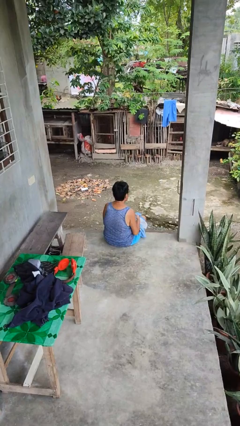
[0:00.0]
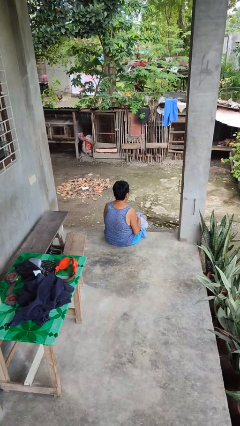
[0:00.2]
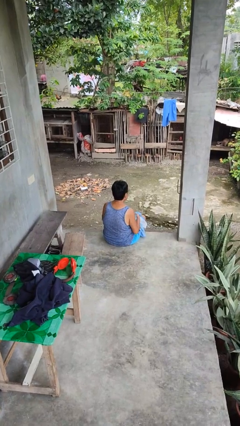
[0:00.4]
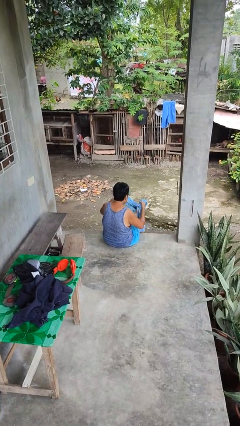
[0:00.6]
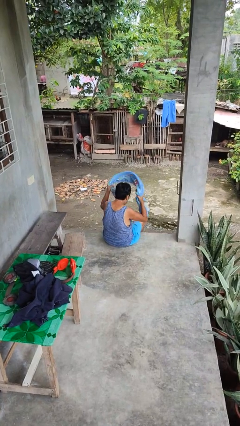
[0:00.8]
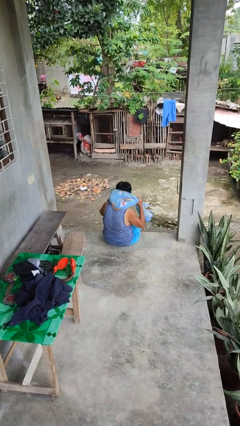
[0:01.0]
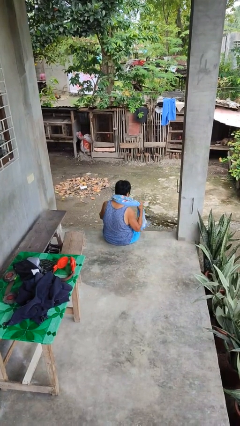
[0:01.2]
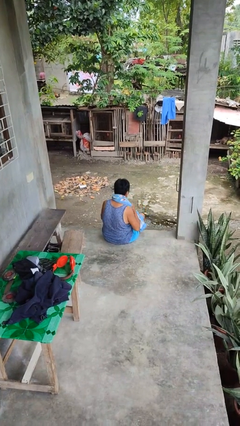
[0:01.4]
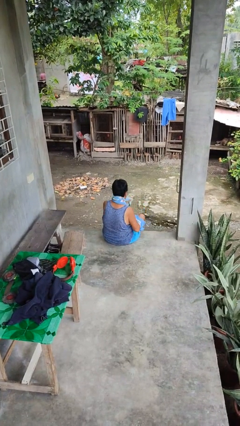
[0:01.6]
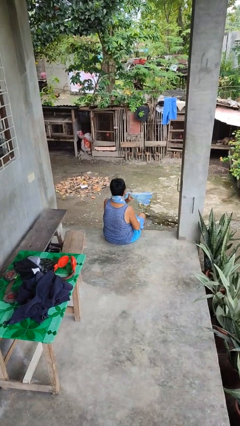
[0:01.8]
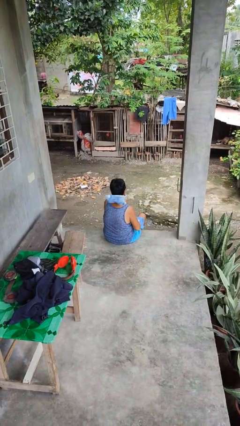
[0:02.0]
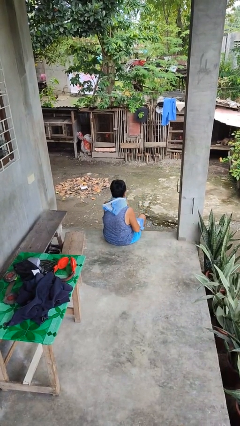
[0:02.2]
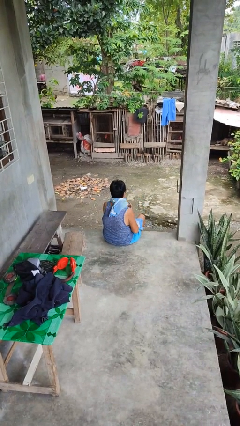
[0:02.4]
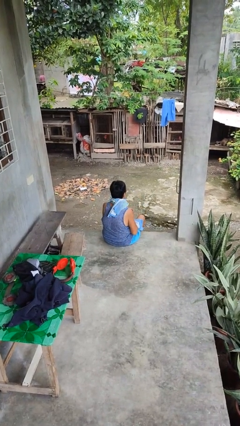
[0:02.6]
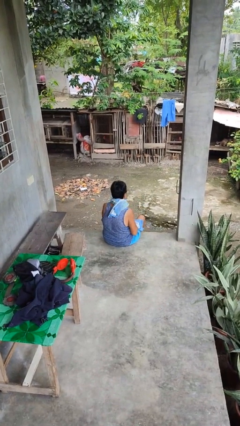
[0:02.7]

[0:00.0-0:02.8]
person puts on scarf

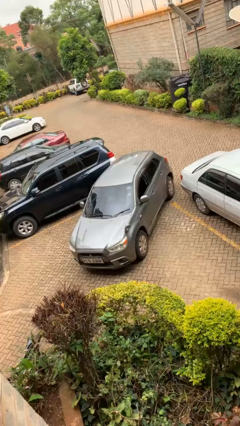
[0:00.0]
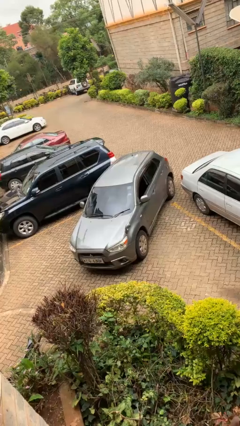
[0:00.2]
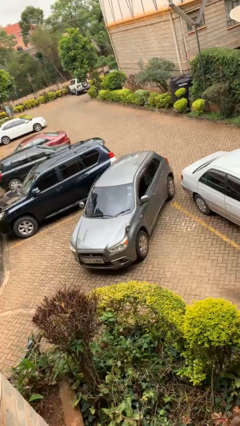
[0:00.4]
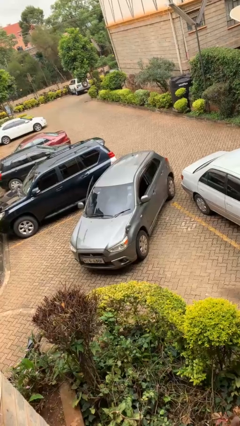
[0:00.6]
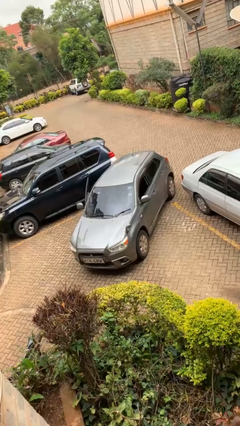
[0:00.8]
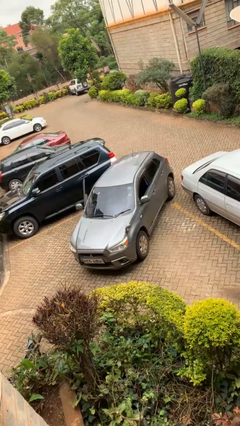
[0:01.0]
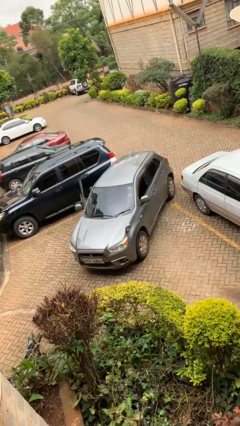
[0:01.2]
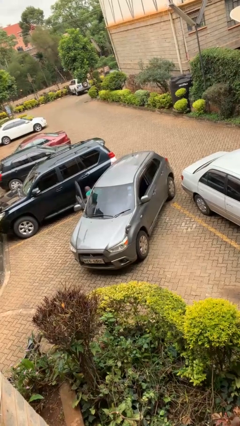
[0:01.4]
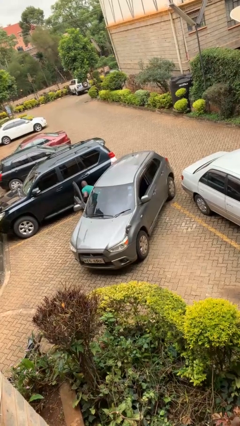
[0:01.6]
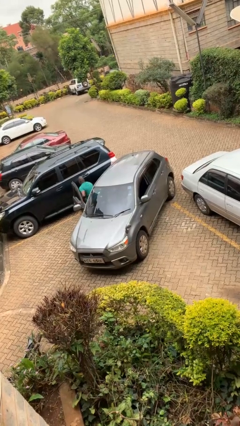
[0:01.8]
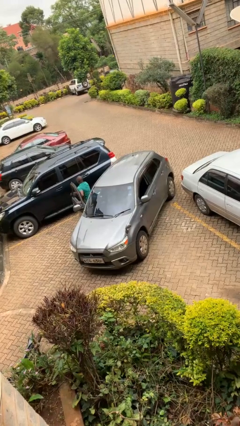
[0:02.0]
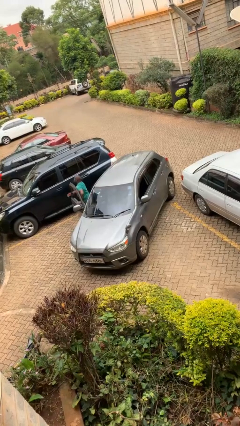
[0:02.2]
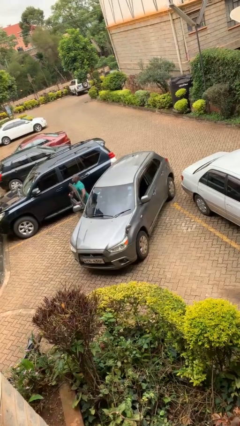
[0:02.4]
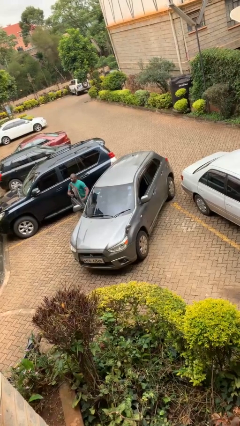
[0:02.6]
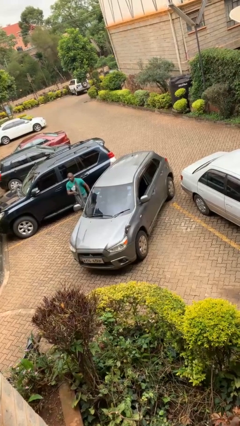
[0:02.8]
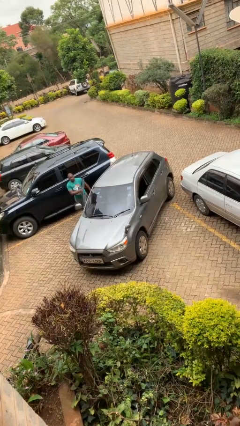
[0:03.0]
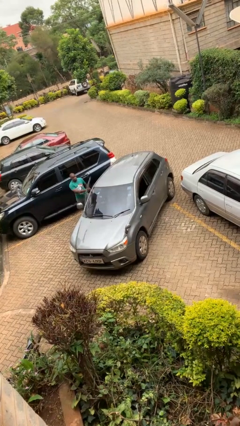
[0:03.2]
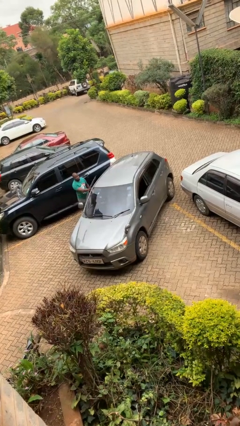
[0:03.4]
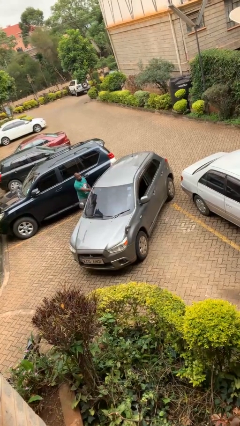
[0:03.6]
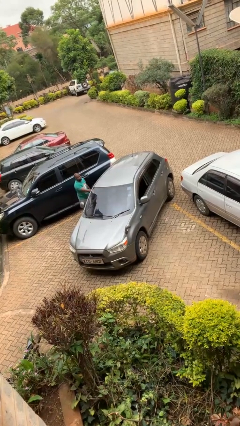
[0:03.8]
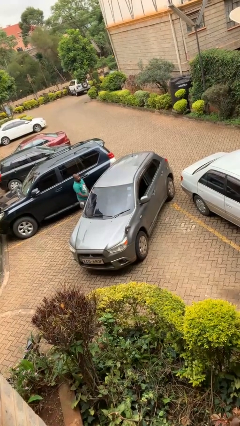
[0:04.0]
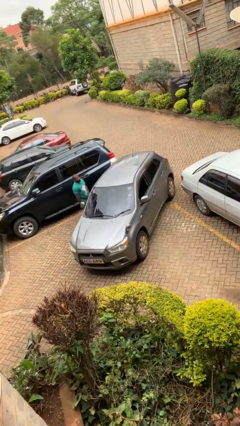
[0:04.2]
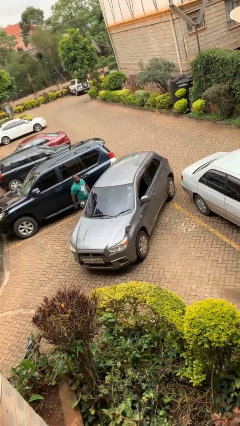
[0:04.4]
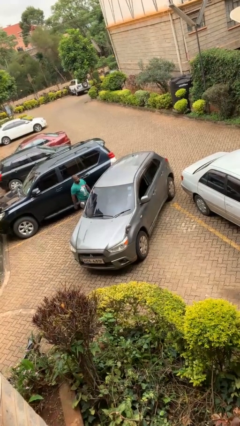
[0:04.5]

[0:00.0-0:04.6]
car drops off person

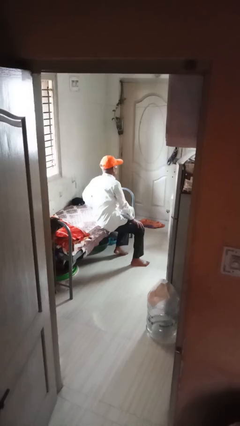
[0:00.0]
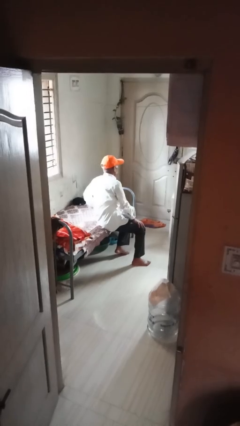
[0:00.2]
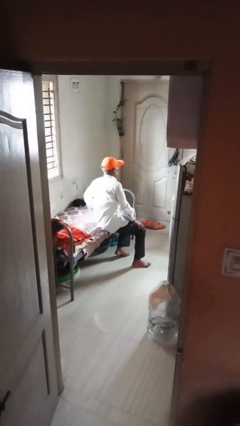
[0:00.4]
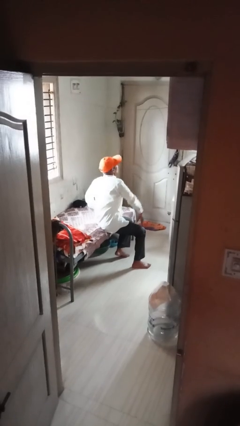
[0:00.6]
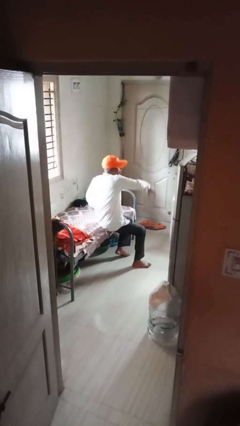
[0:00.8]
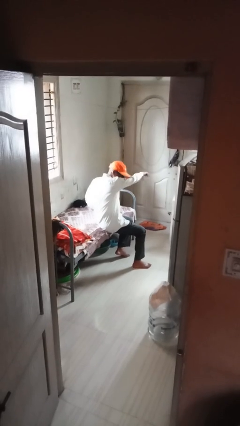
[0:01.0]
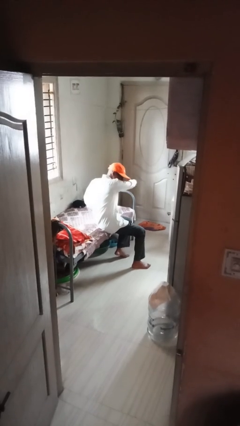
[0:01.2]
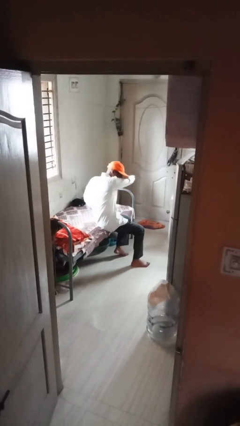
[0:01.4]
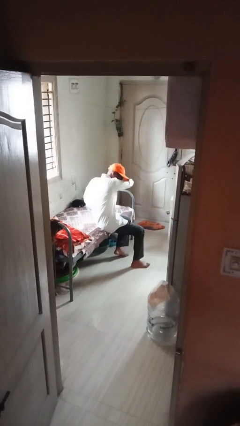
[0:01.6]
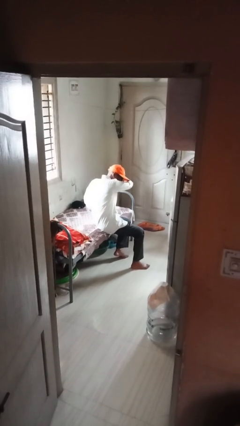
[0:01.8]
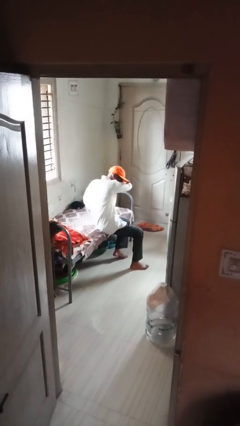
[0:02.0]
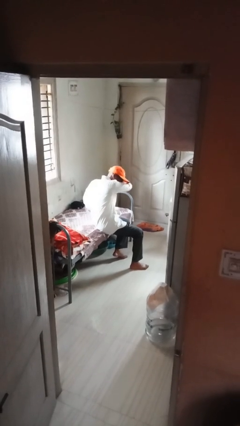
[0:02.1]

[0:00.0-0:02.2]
person sneezes into arm

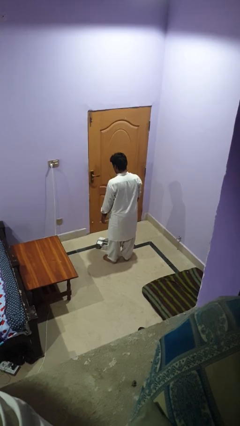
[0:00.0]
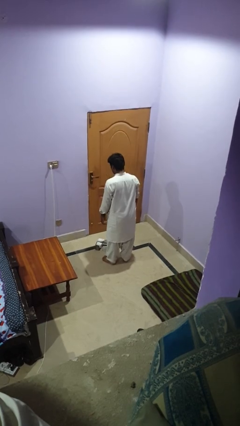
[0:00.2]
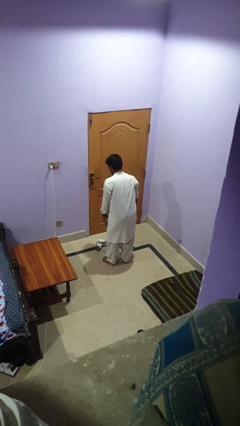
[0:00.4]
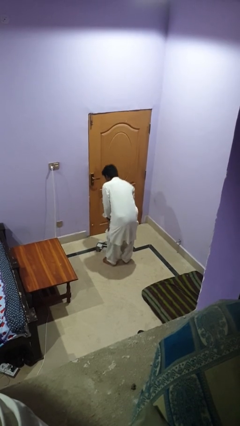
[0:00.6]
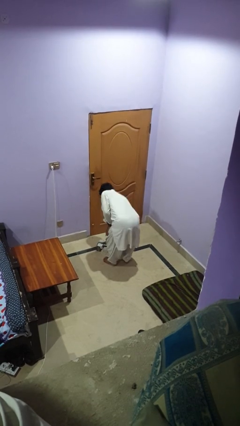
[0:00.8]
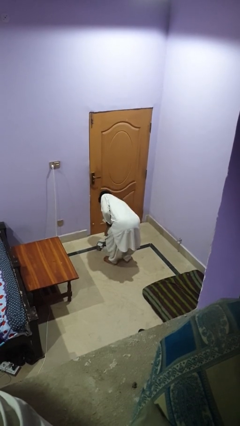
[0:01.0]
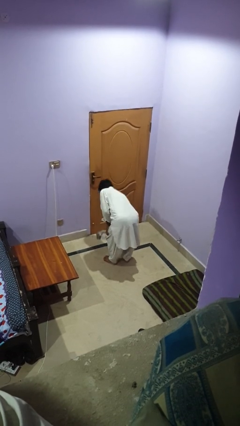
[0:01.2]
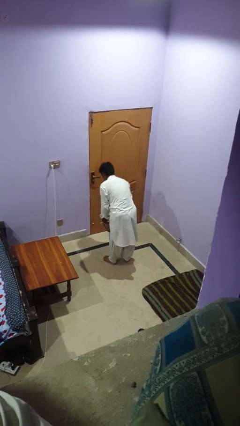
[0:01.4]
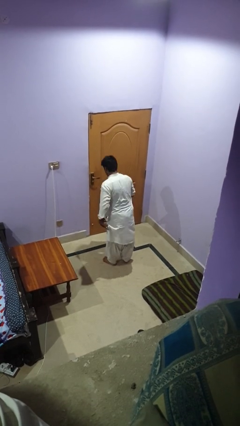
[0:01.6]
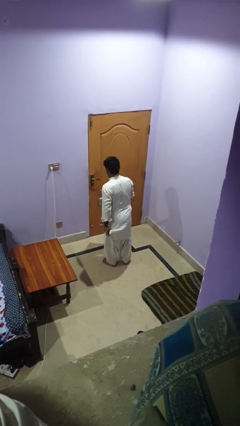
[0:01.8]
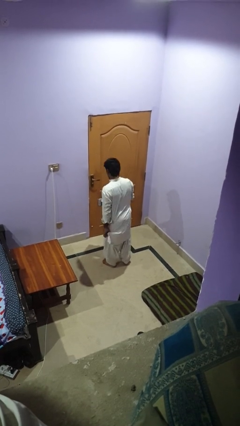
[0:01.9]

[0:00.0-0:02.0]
person picks up object from floor

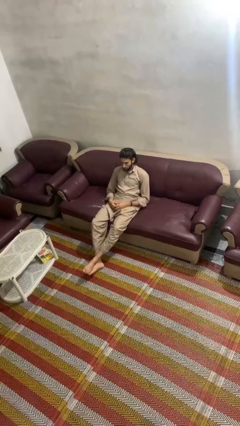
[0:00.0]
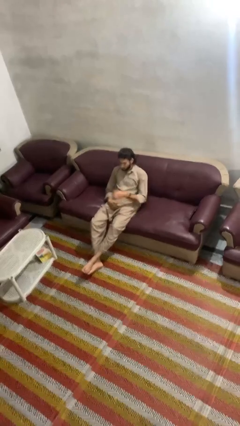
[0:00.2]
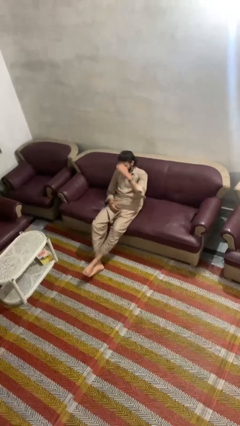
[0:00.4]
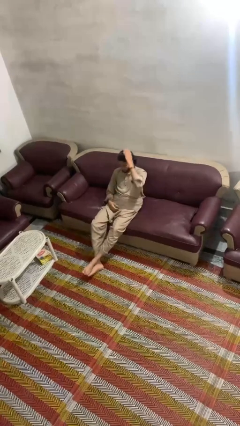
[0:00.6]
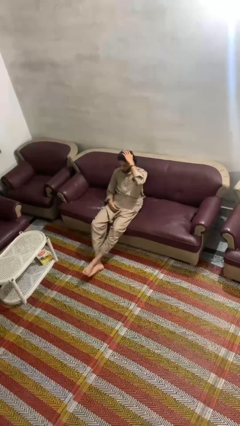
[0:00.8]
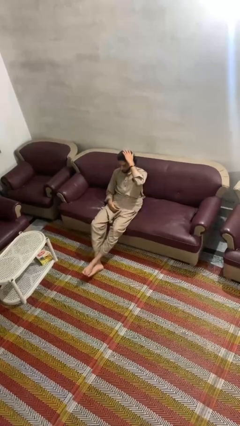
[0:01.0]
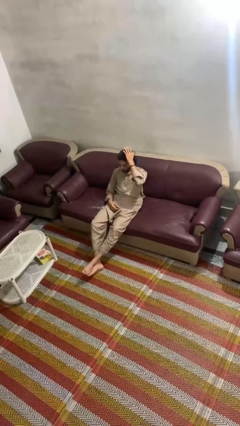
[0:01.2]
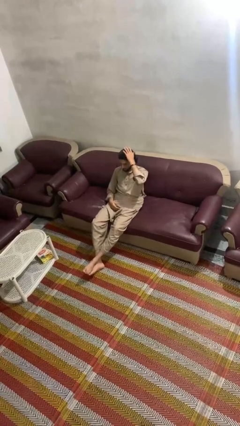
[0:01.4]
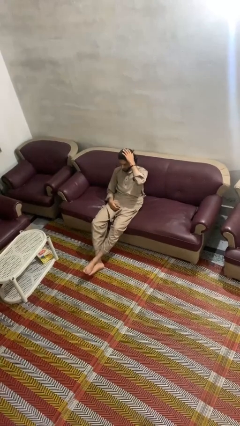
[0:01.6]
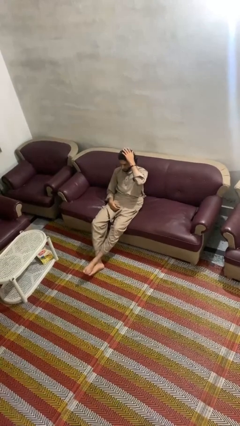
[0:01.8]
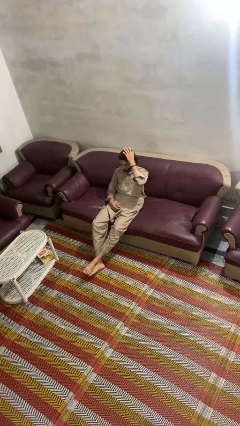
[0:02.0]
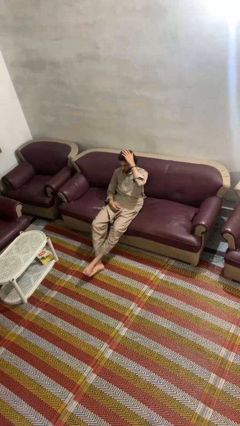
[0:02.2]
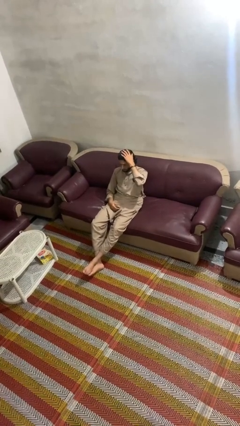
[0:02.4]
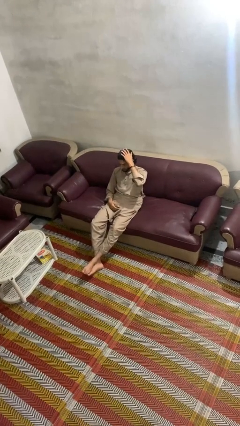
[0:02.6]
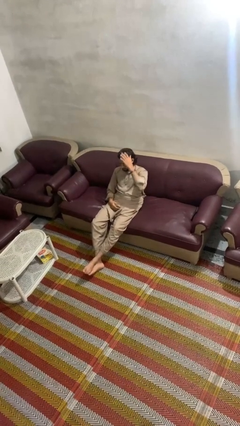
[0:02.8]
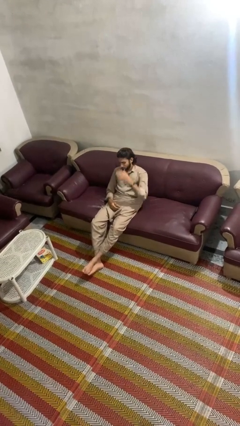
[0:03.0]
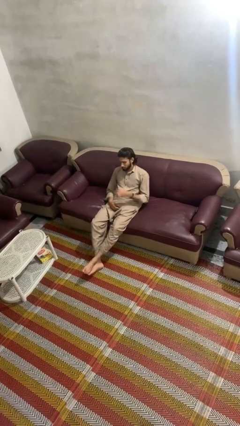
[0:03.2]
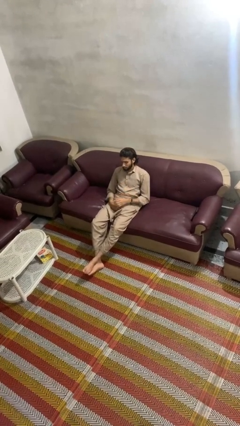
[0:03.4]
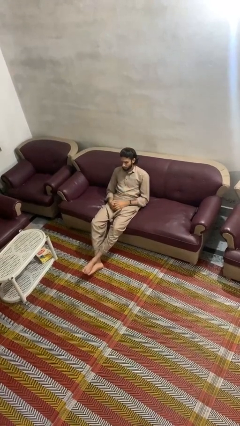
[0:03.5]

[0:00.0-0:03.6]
person pats head

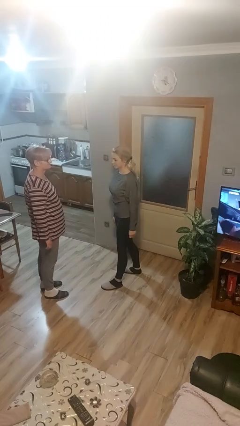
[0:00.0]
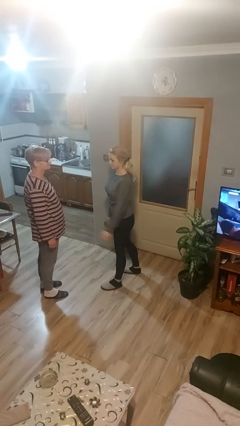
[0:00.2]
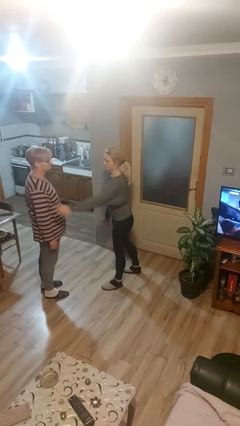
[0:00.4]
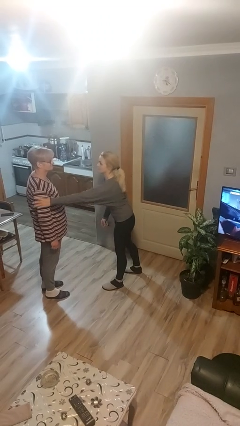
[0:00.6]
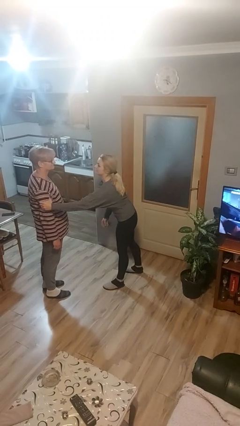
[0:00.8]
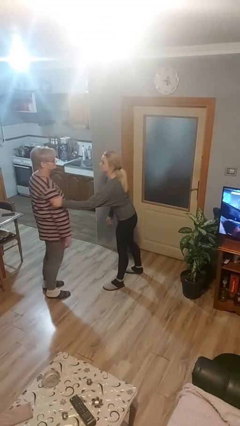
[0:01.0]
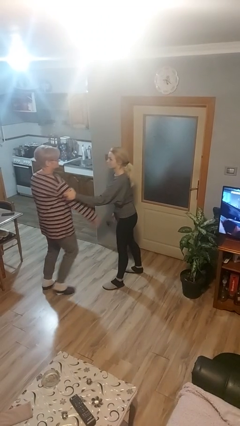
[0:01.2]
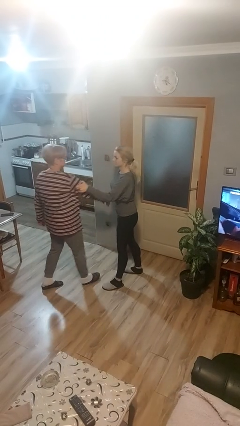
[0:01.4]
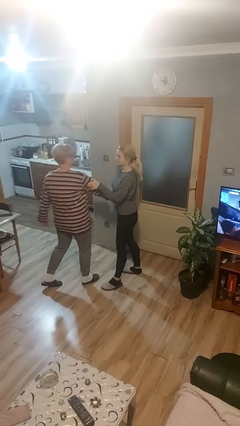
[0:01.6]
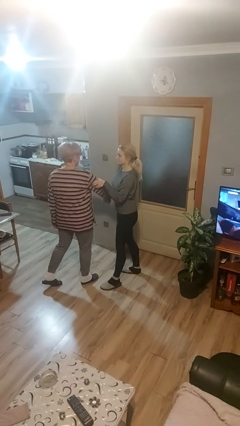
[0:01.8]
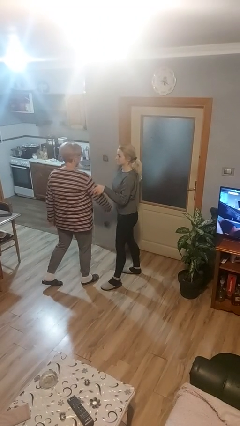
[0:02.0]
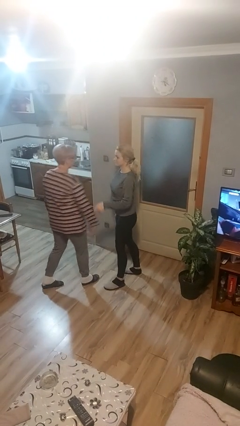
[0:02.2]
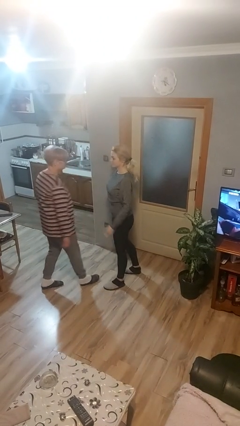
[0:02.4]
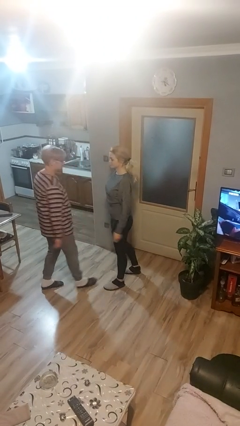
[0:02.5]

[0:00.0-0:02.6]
person grabs person by bicep
